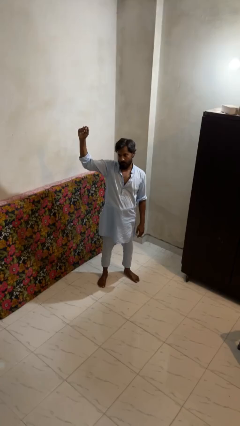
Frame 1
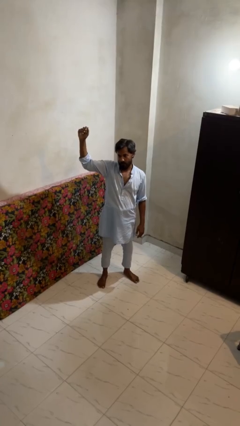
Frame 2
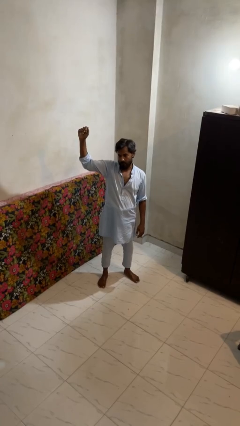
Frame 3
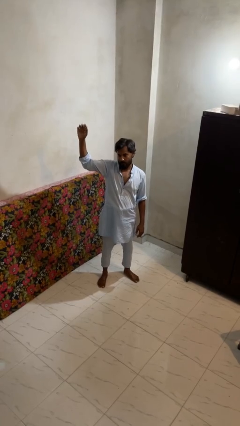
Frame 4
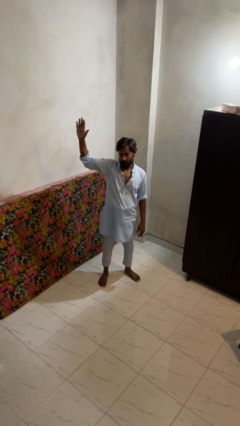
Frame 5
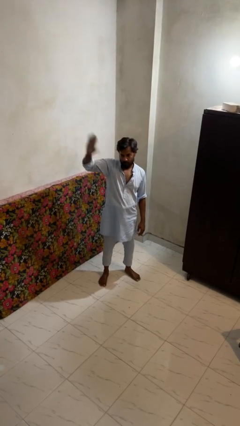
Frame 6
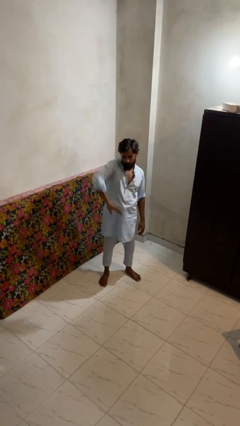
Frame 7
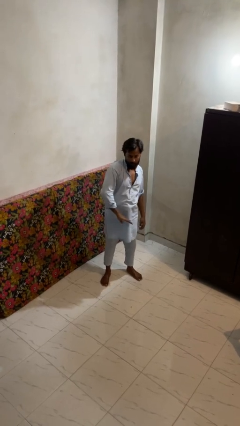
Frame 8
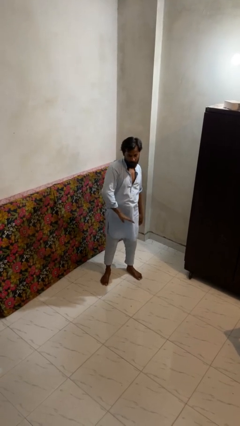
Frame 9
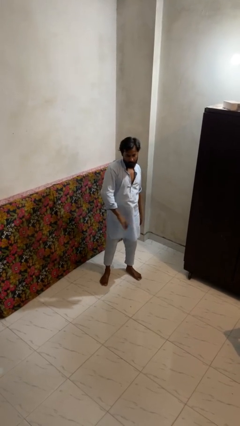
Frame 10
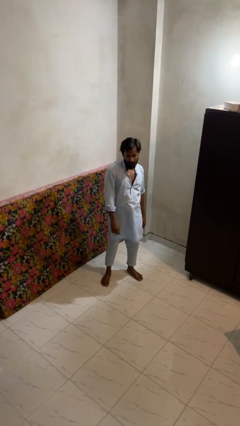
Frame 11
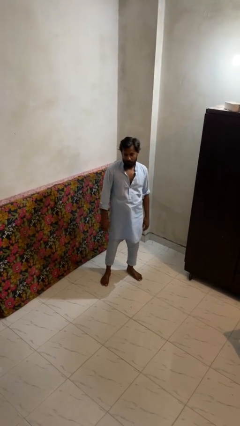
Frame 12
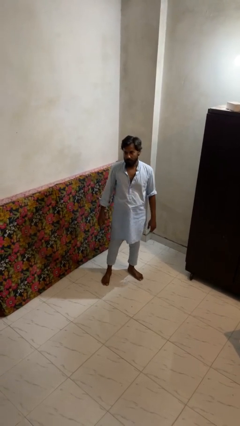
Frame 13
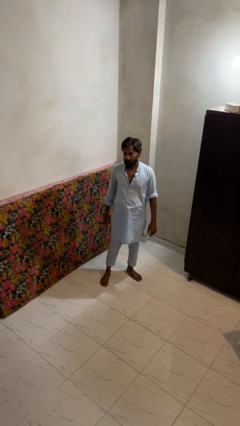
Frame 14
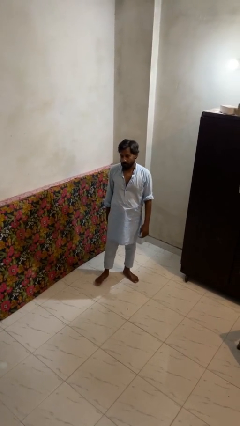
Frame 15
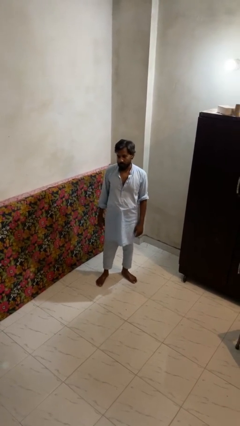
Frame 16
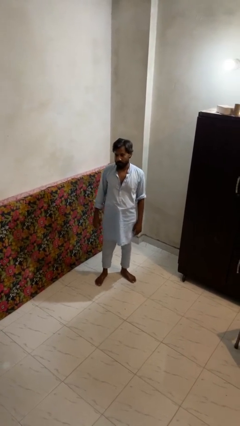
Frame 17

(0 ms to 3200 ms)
person gestures swipe down

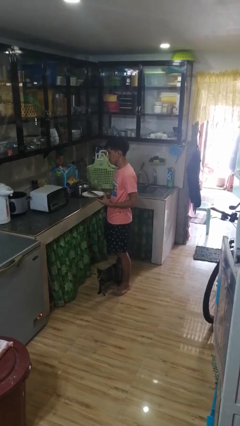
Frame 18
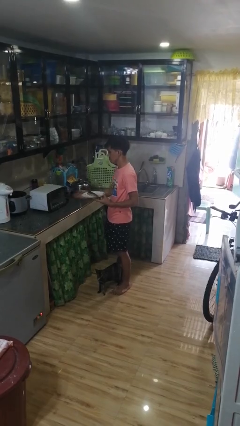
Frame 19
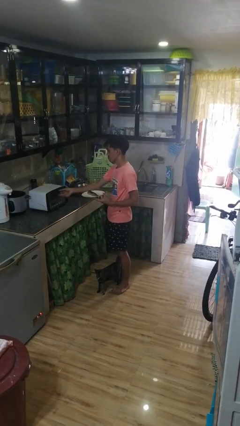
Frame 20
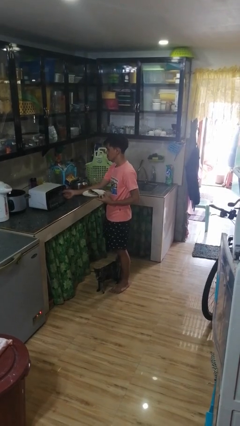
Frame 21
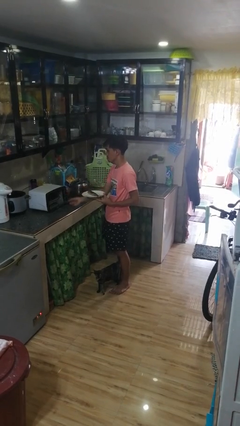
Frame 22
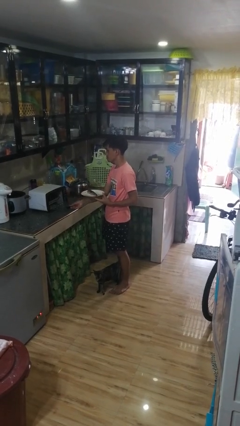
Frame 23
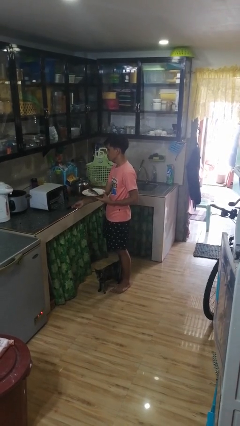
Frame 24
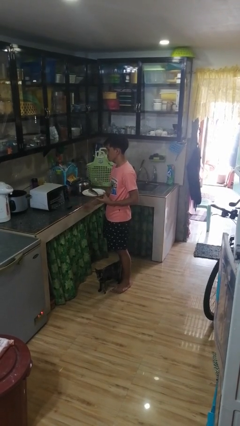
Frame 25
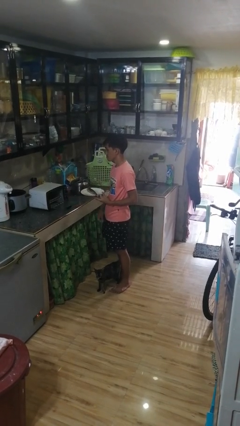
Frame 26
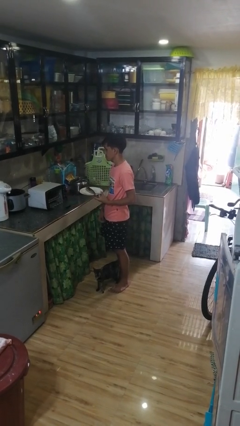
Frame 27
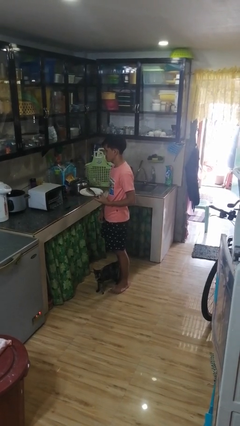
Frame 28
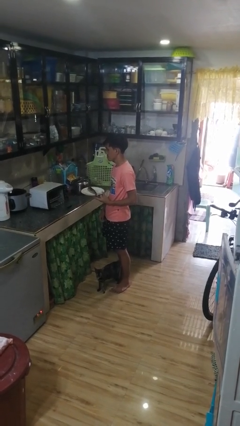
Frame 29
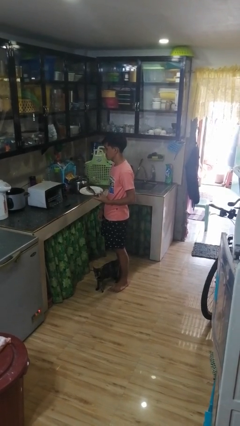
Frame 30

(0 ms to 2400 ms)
person opens microwave

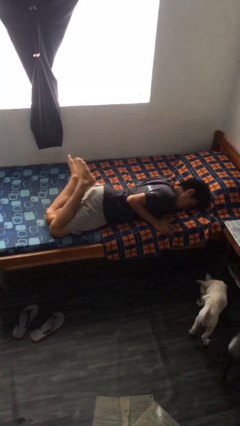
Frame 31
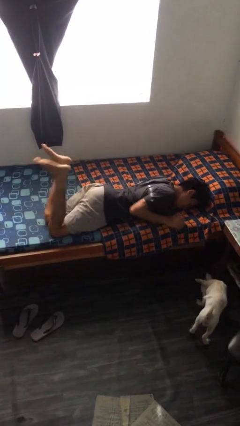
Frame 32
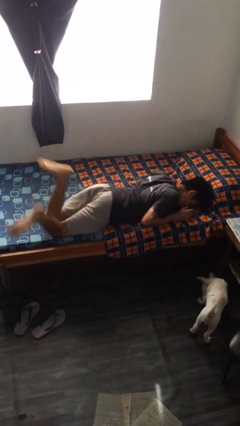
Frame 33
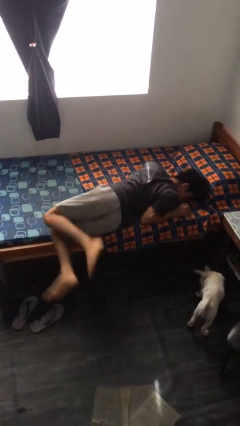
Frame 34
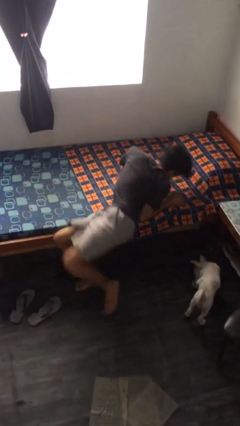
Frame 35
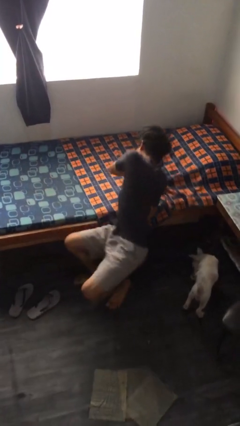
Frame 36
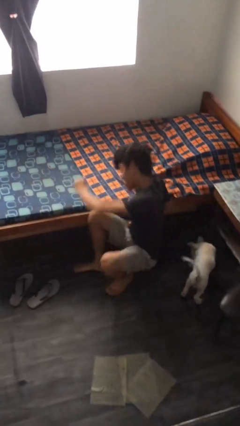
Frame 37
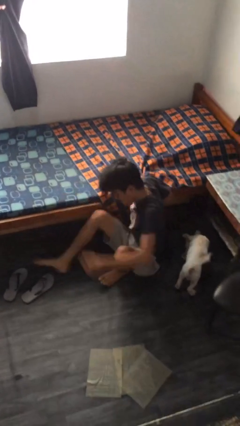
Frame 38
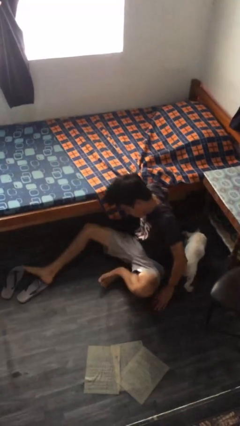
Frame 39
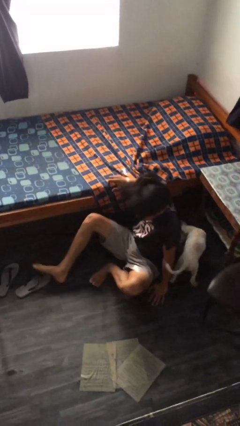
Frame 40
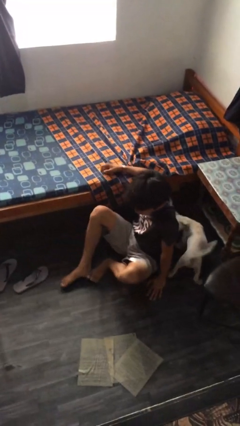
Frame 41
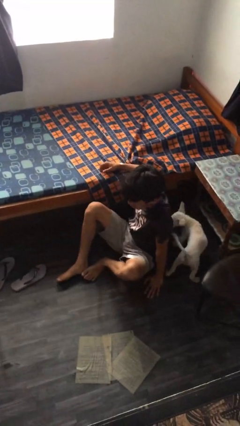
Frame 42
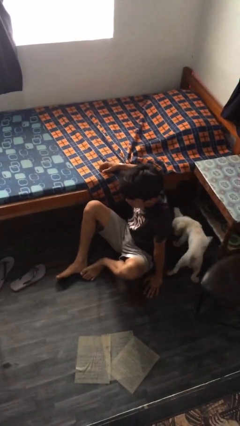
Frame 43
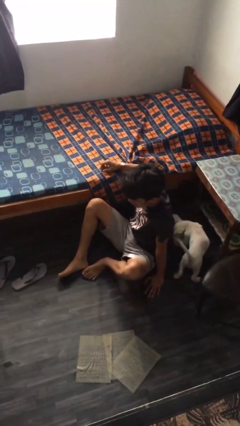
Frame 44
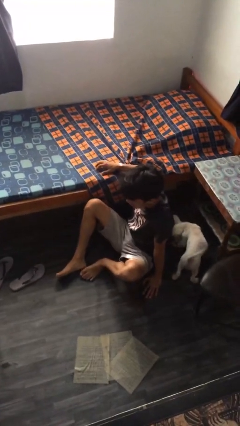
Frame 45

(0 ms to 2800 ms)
person falls from bed

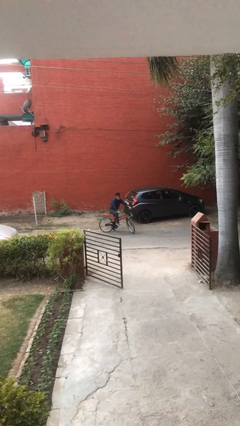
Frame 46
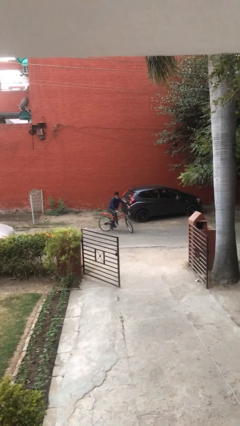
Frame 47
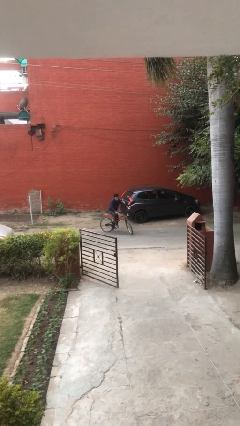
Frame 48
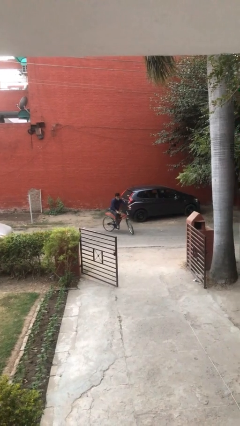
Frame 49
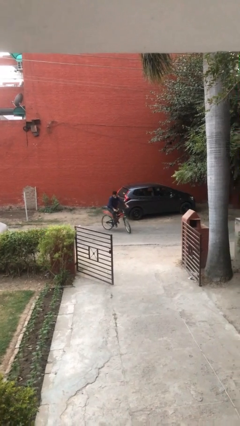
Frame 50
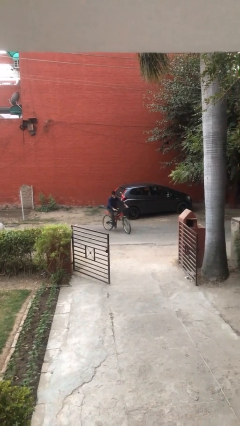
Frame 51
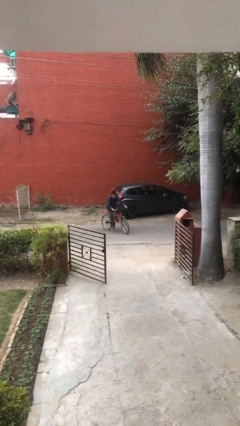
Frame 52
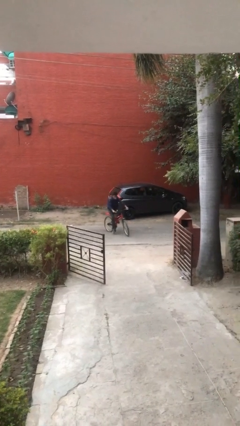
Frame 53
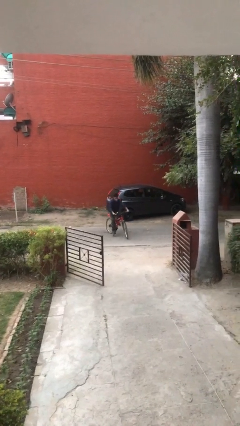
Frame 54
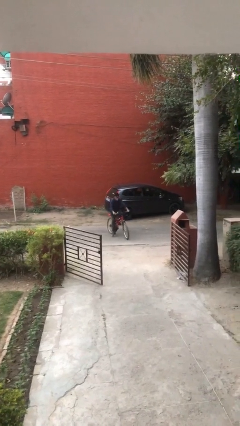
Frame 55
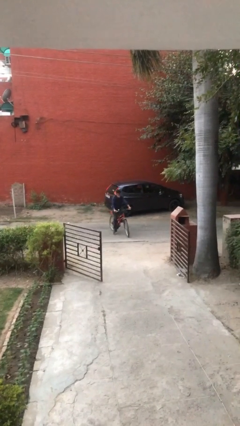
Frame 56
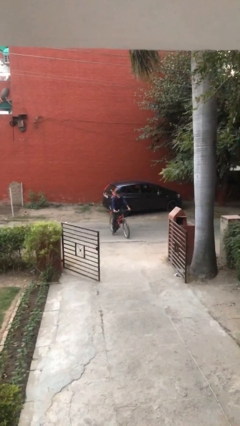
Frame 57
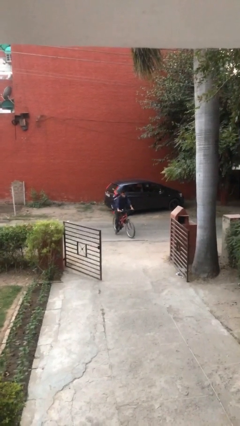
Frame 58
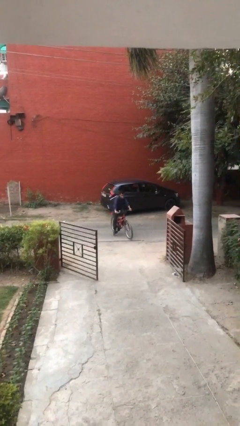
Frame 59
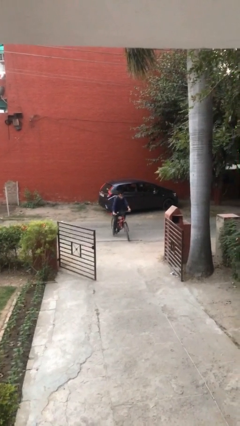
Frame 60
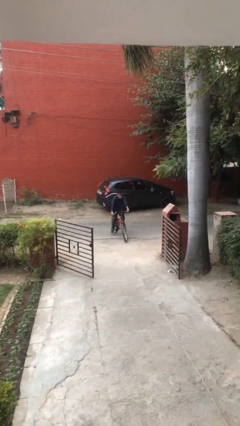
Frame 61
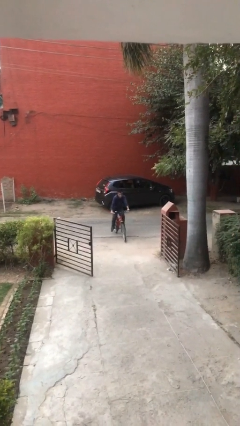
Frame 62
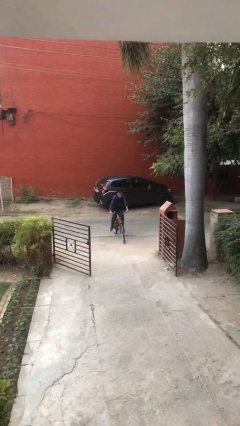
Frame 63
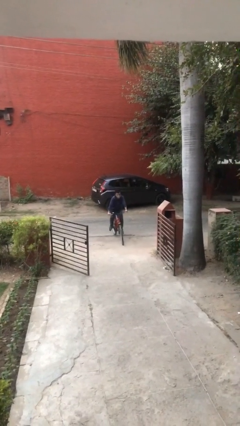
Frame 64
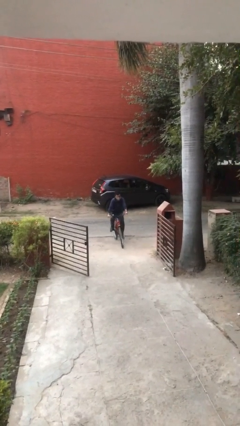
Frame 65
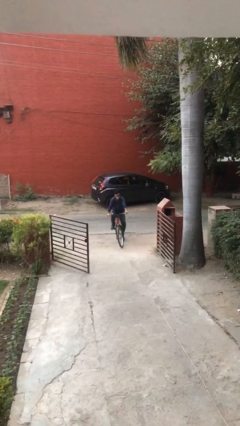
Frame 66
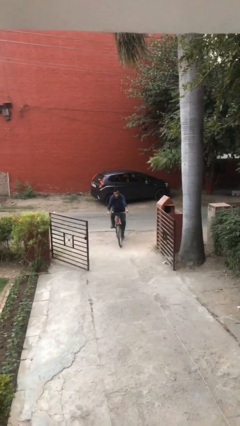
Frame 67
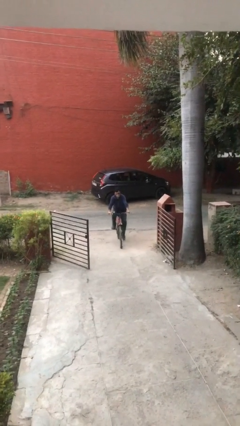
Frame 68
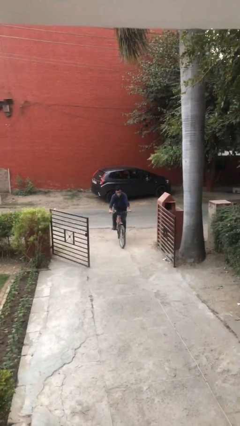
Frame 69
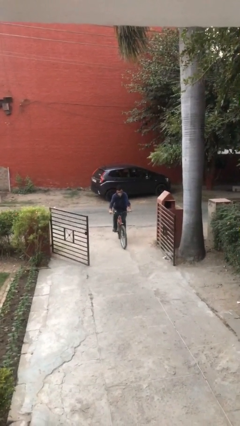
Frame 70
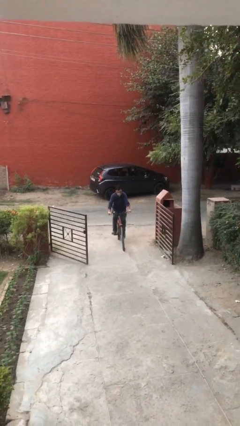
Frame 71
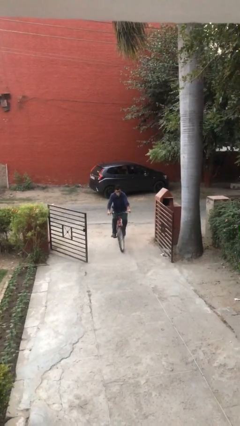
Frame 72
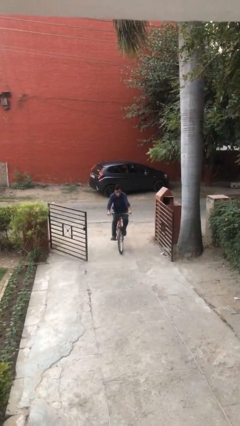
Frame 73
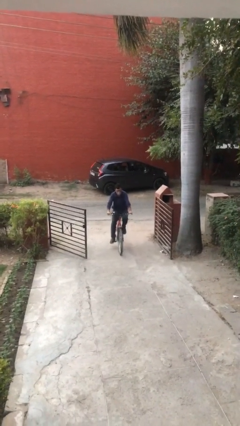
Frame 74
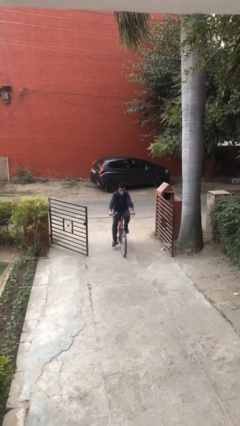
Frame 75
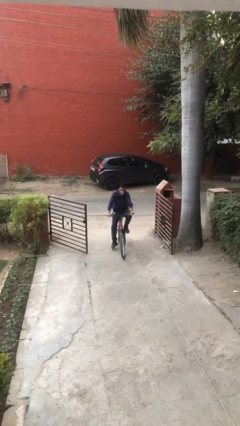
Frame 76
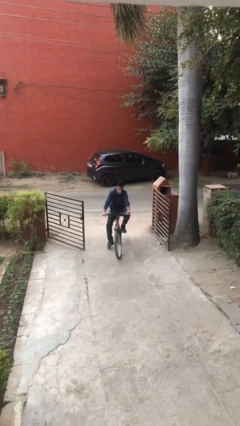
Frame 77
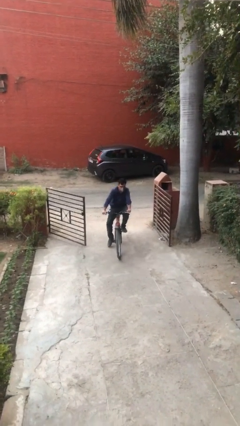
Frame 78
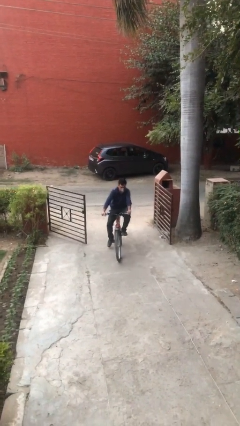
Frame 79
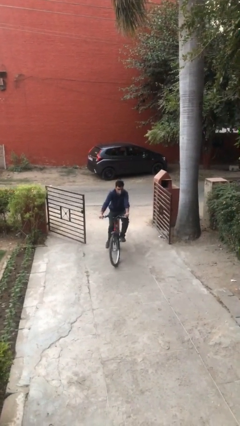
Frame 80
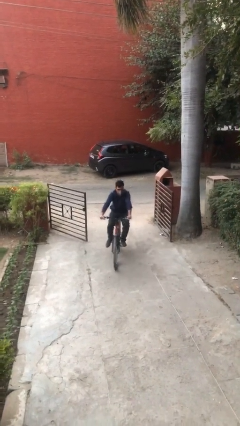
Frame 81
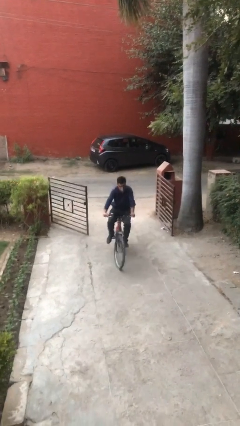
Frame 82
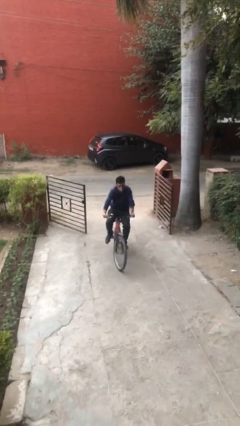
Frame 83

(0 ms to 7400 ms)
person rides bicycle

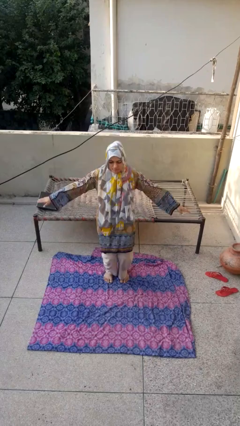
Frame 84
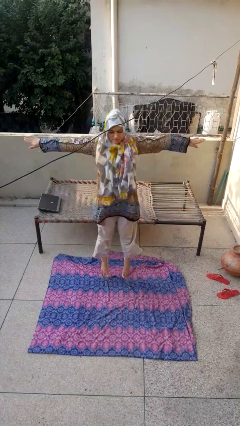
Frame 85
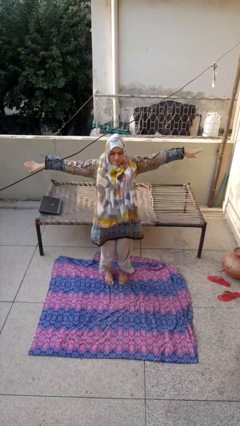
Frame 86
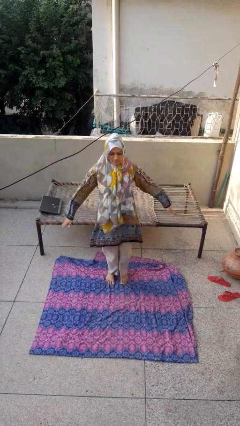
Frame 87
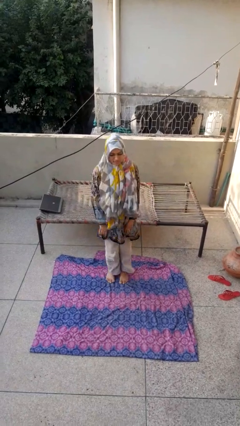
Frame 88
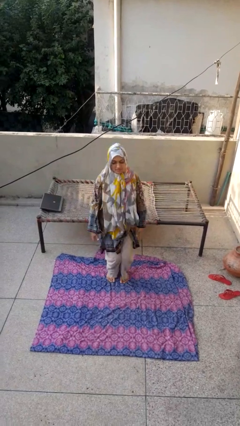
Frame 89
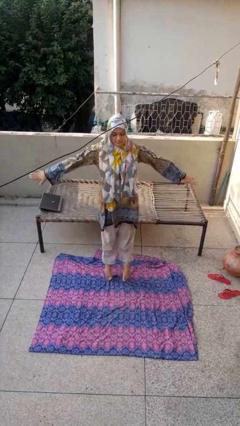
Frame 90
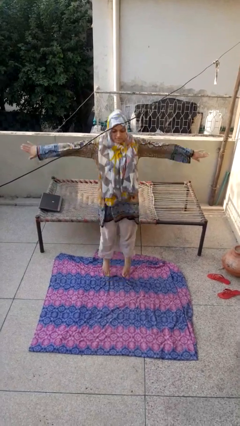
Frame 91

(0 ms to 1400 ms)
person exercises with jumping jacks
